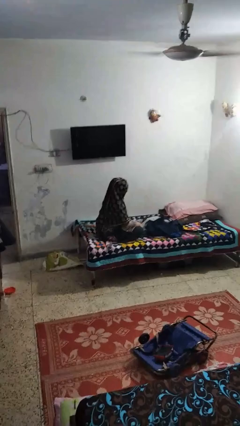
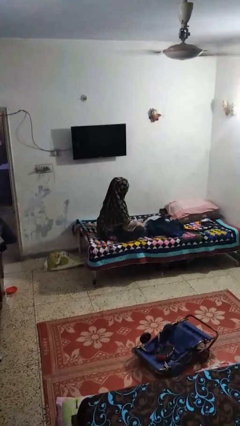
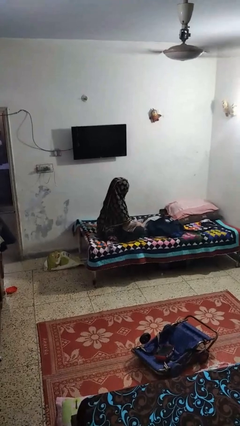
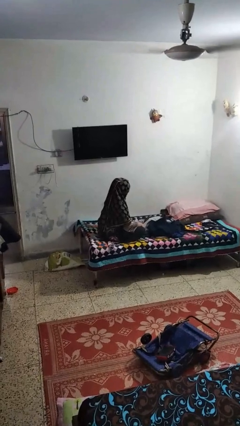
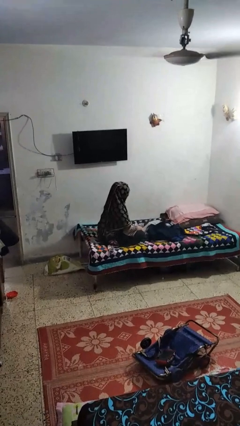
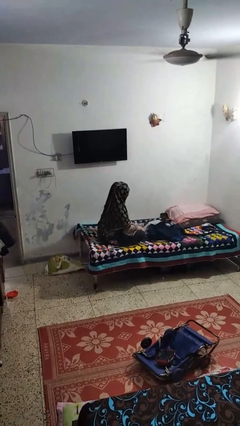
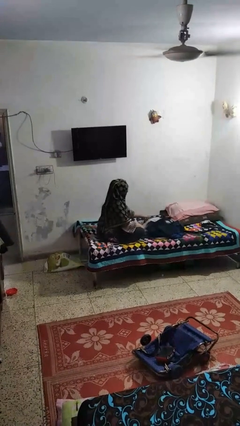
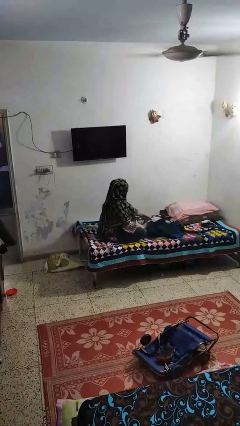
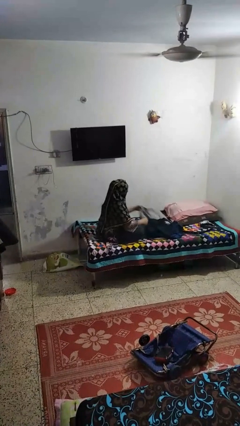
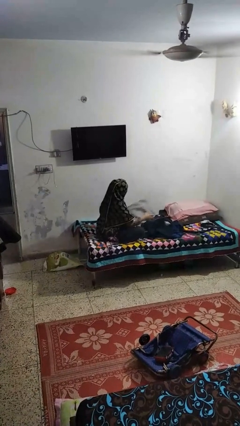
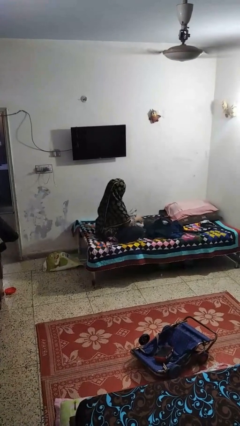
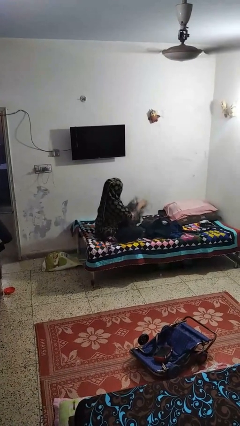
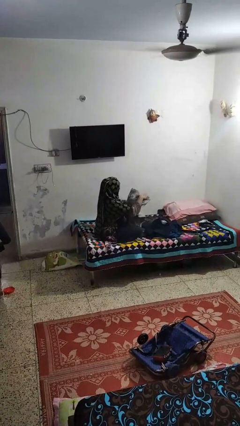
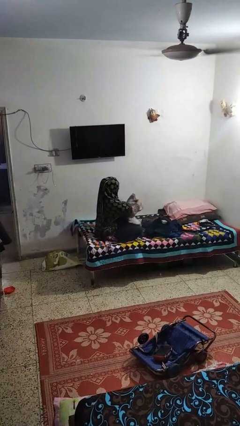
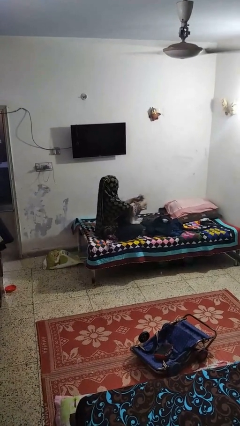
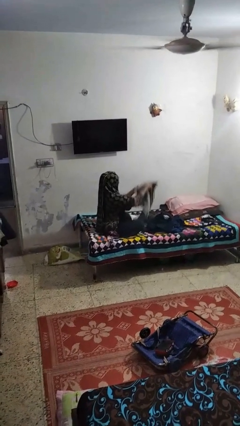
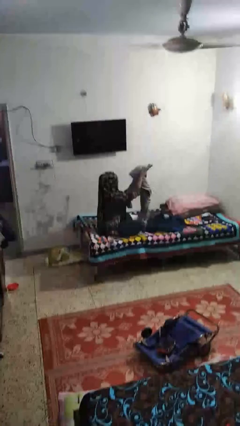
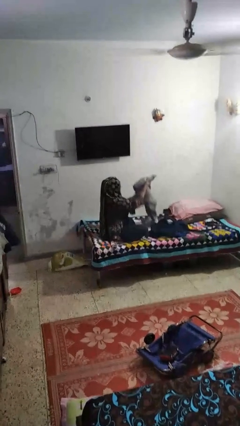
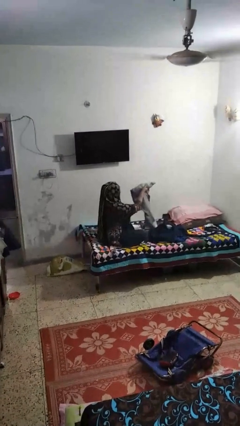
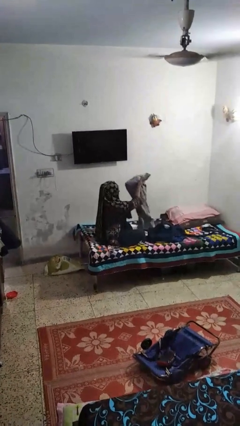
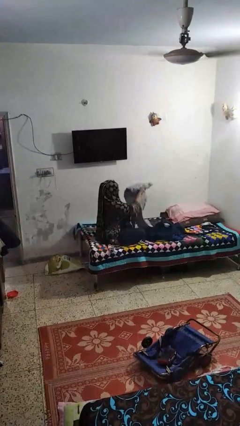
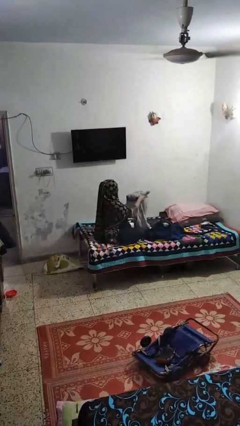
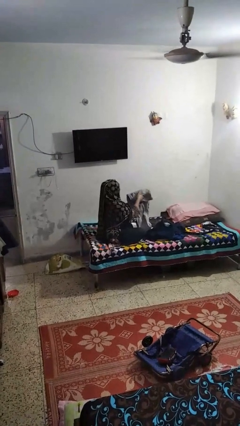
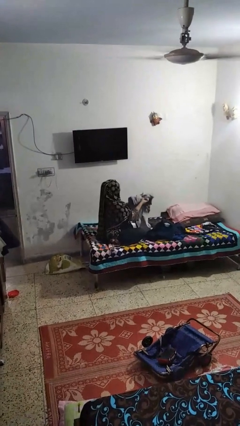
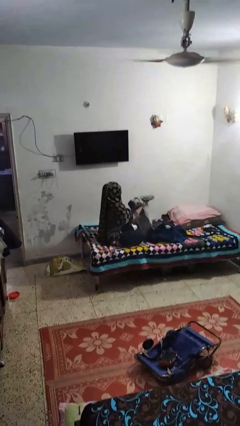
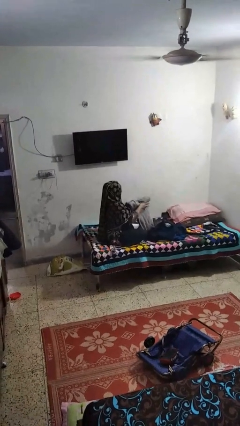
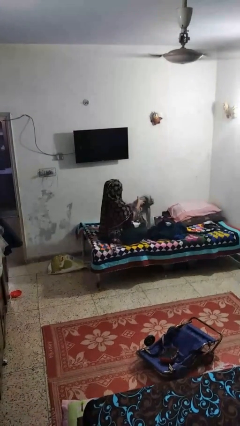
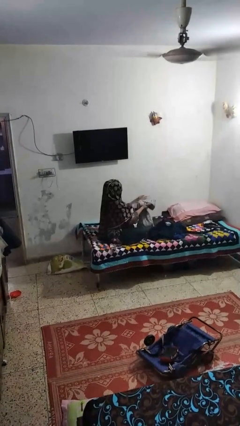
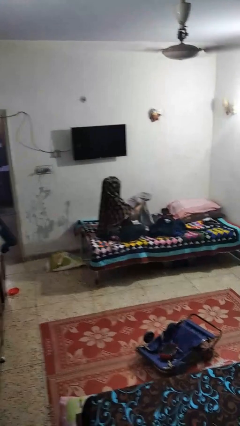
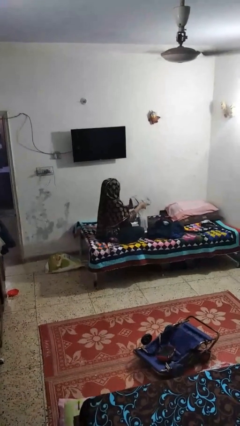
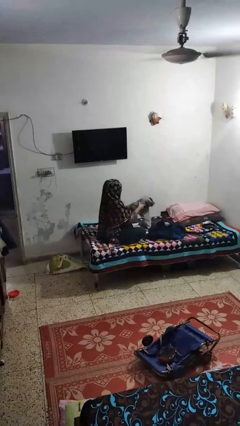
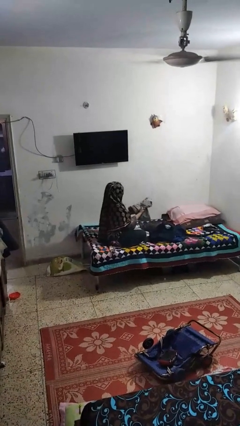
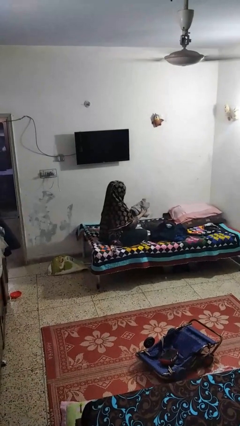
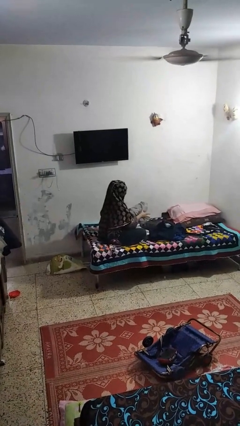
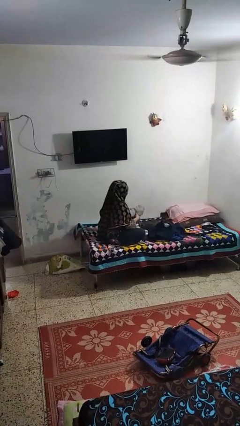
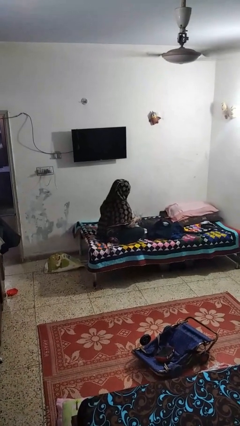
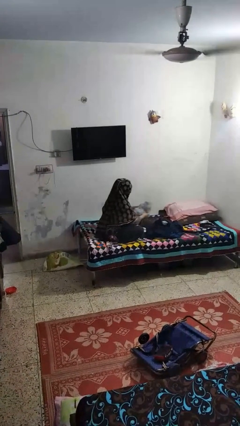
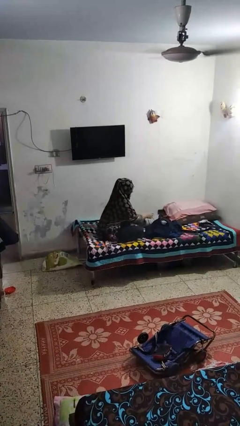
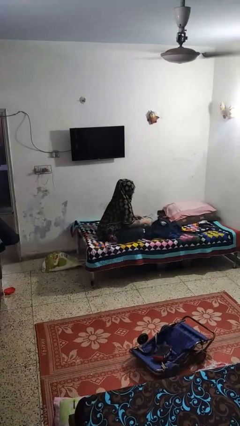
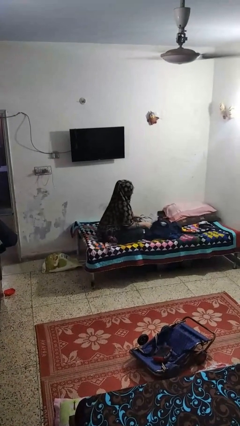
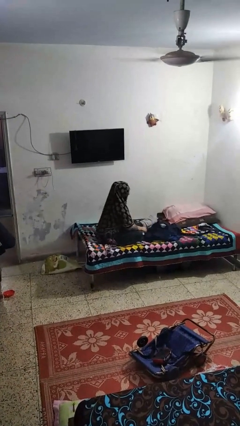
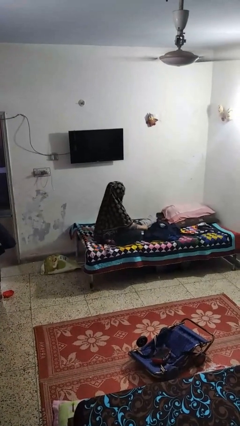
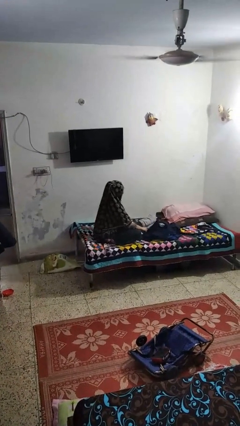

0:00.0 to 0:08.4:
person folds pants

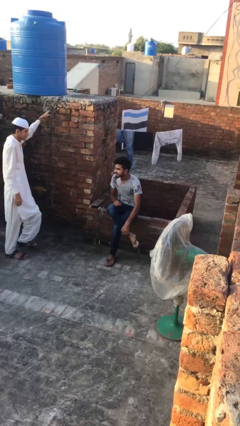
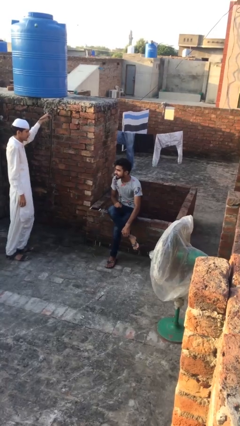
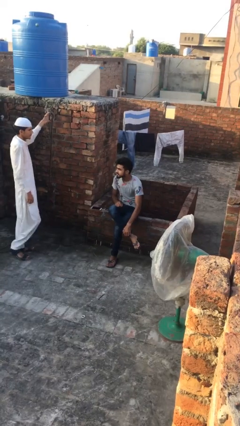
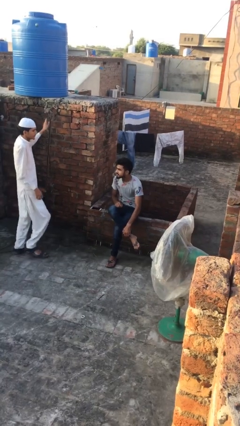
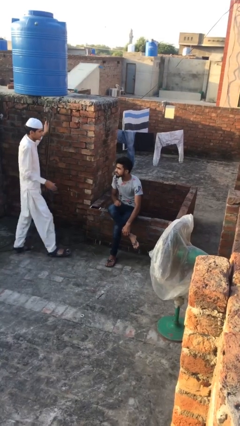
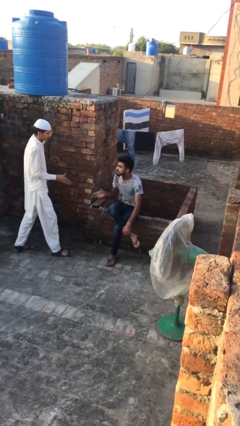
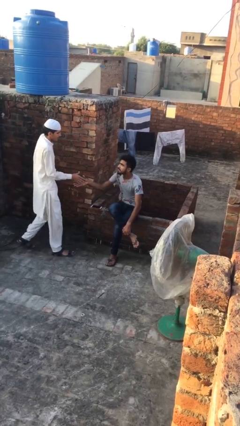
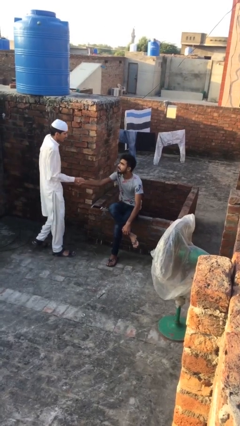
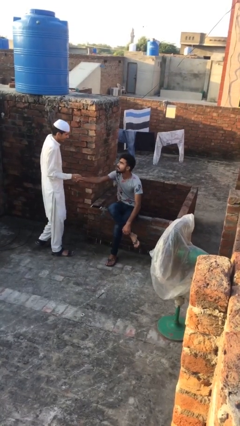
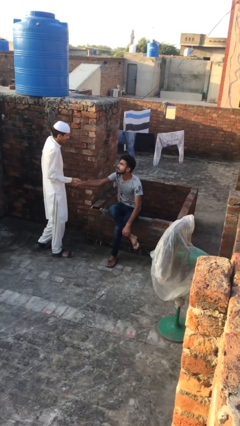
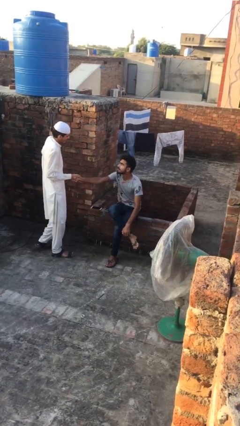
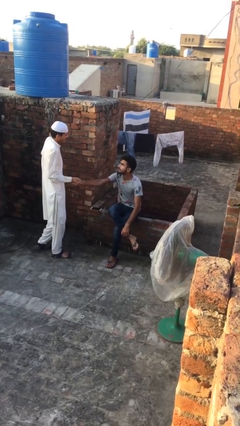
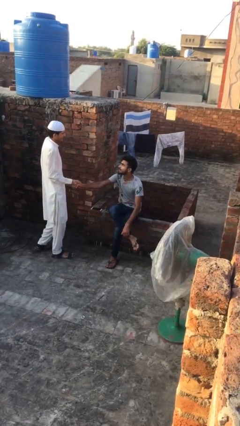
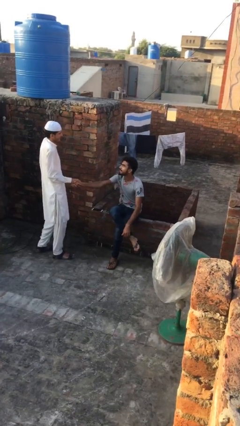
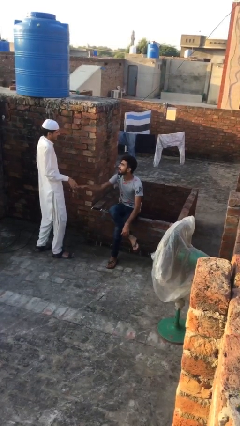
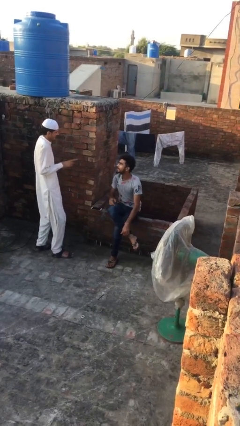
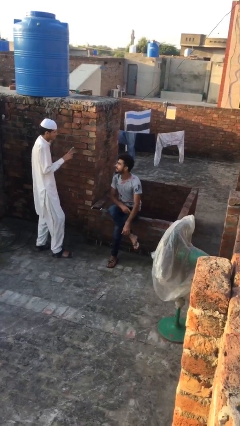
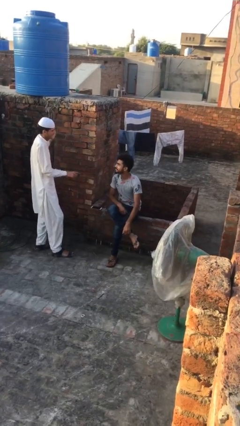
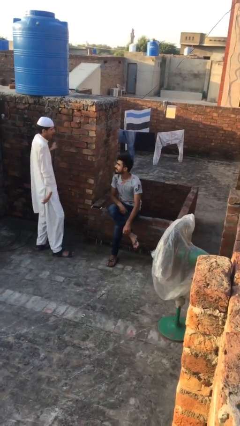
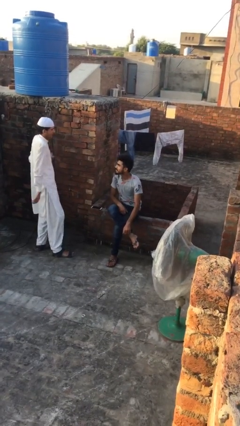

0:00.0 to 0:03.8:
person shakes hand

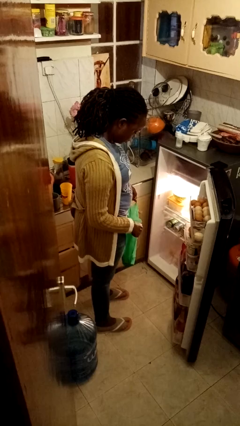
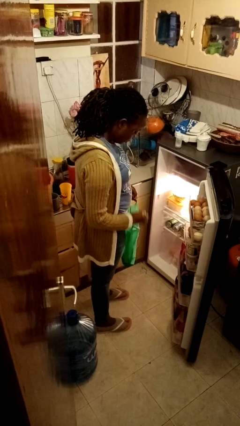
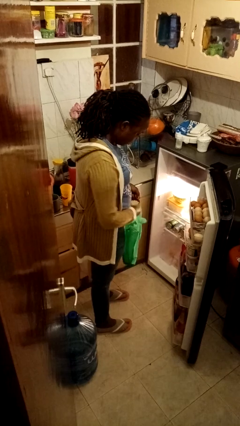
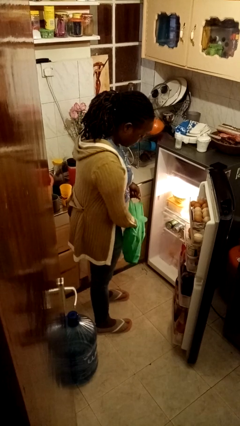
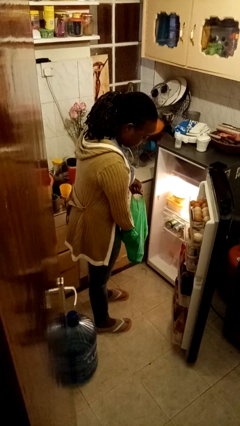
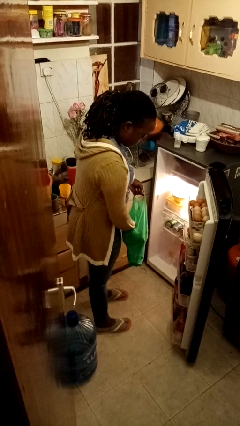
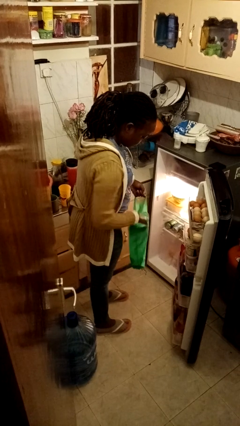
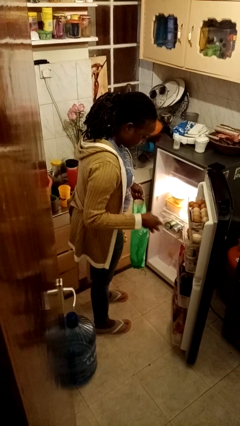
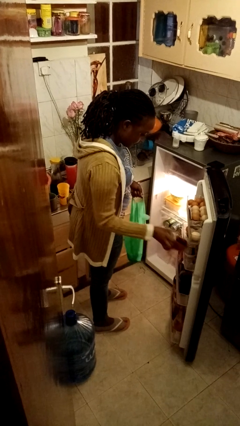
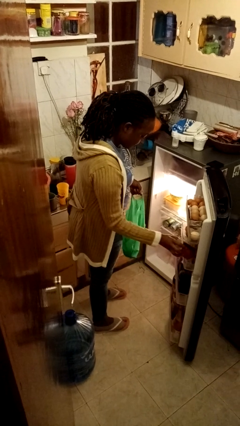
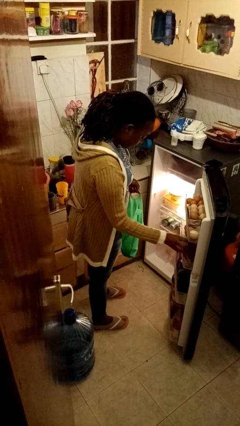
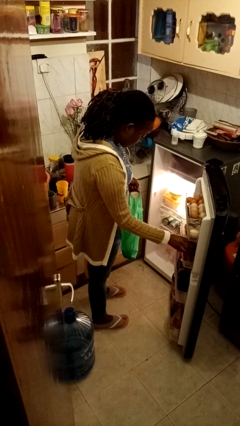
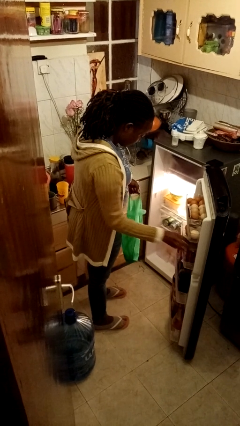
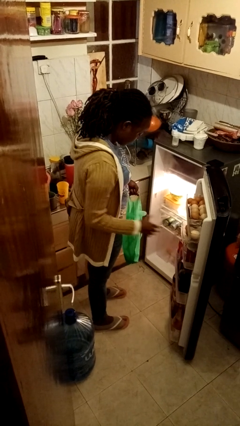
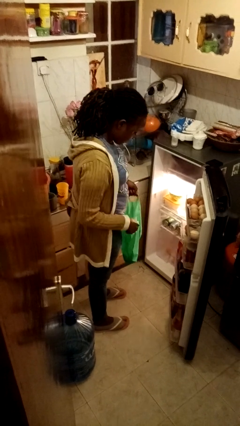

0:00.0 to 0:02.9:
person loads groceries into refrigerator

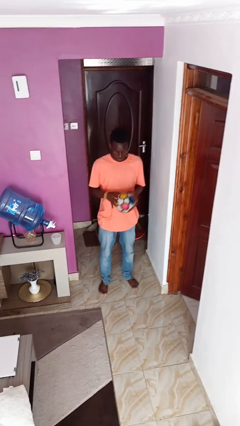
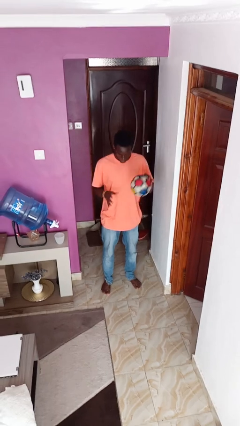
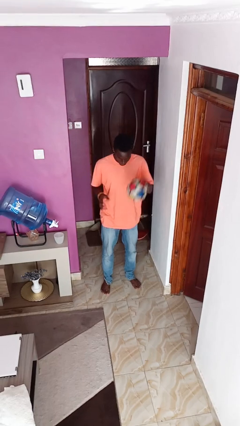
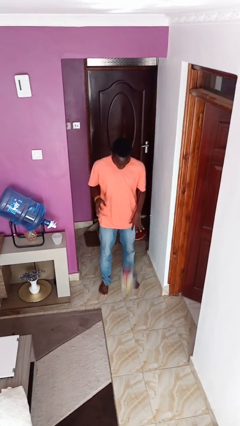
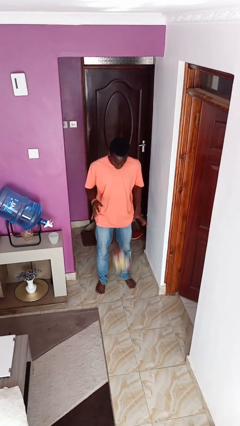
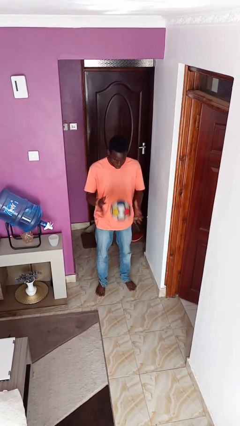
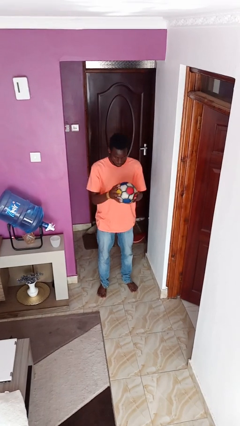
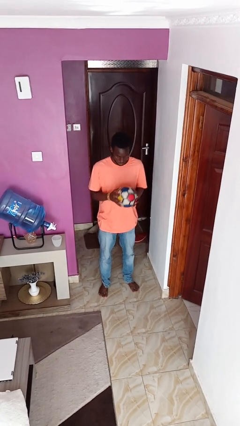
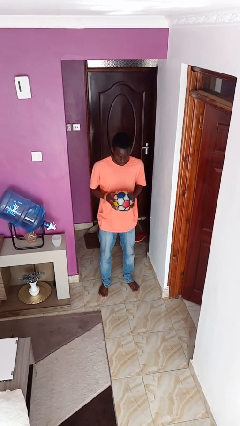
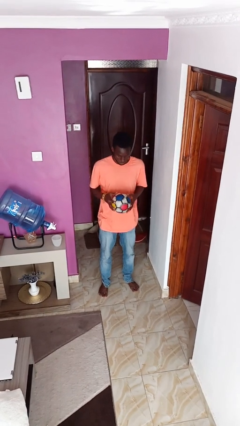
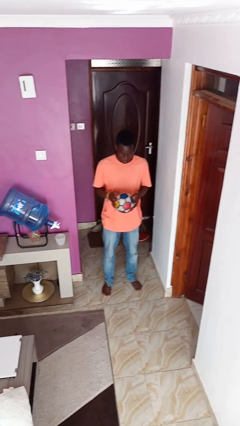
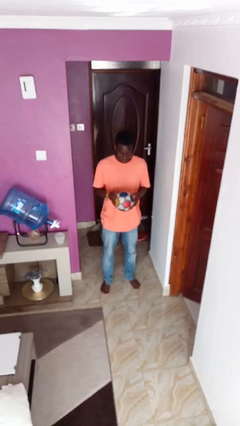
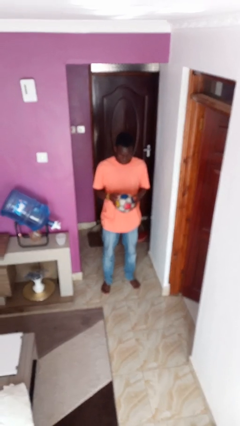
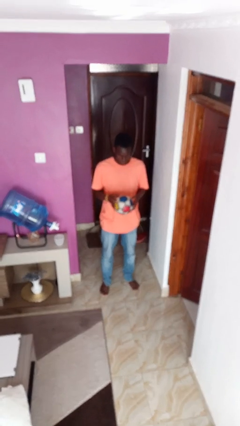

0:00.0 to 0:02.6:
person bounces ball on floor

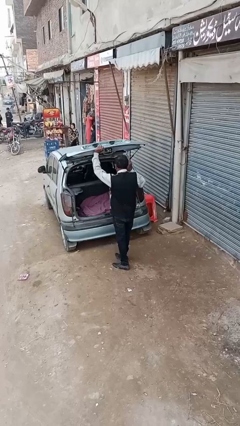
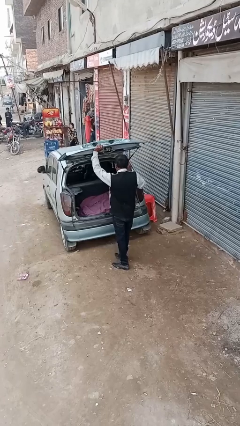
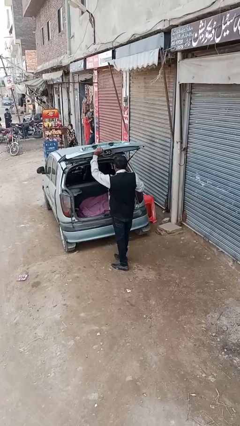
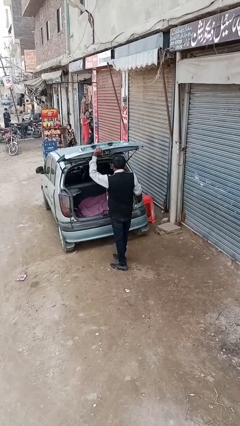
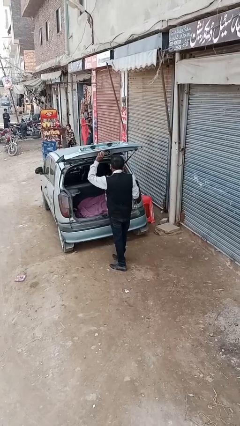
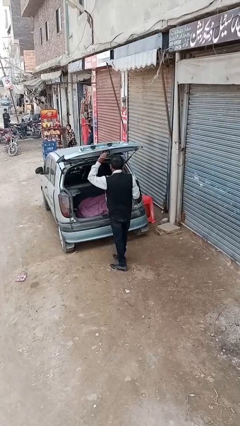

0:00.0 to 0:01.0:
person opens car trunk
